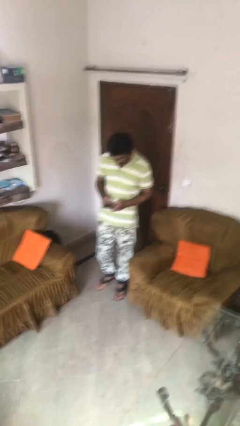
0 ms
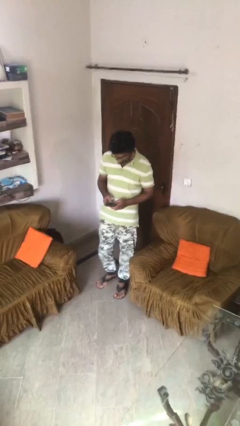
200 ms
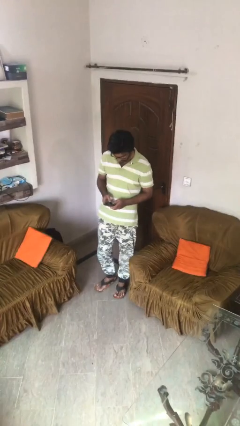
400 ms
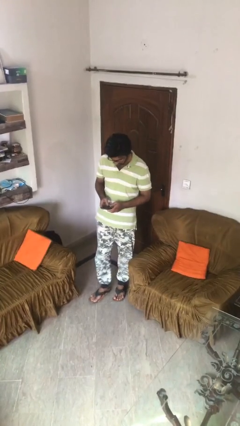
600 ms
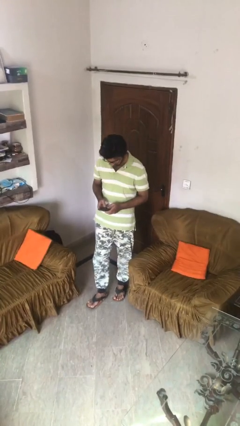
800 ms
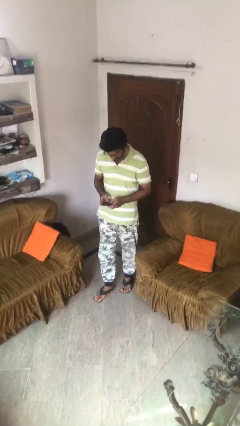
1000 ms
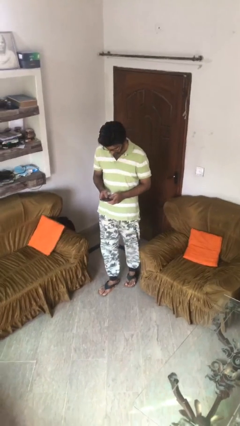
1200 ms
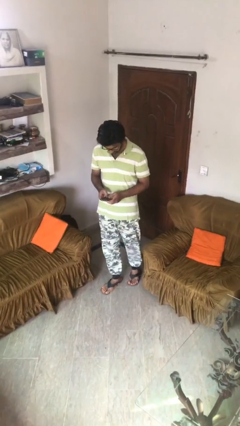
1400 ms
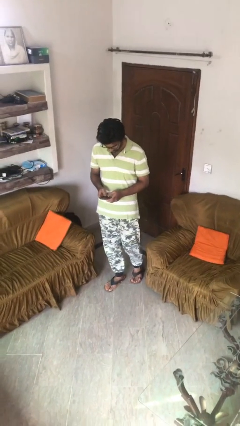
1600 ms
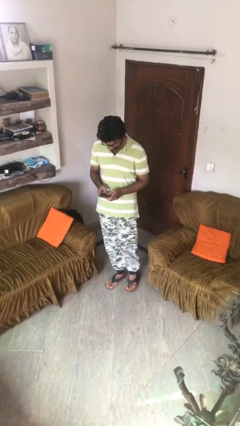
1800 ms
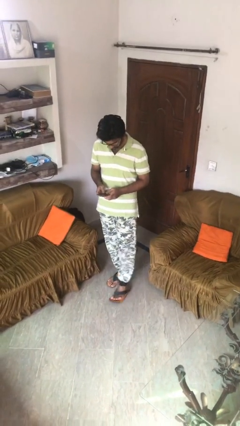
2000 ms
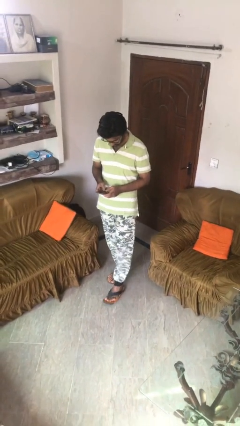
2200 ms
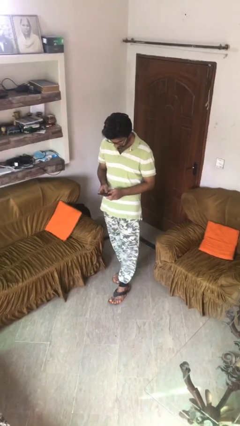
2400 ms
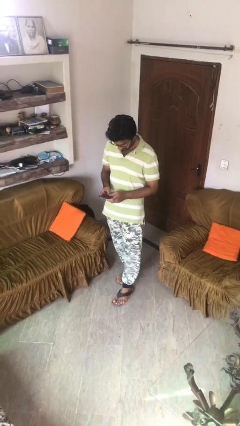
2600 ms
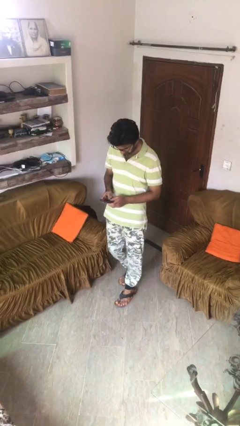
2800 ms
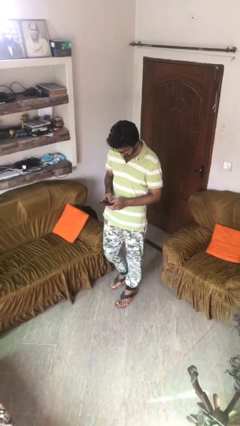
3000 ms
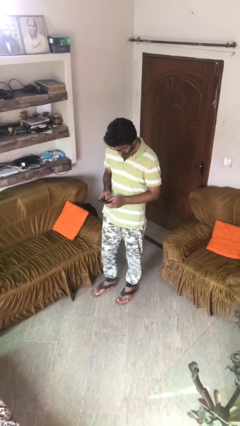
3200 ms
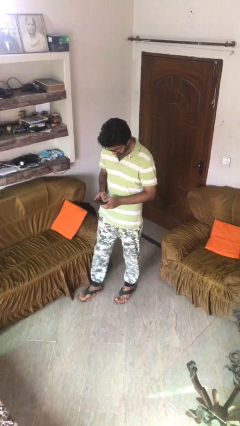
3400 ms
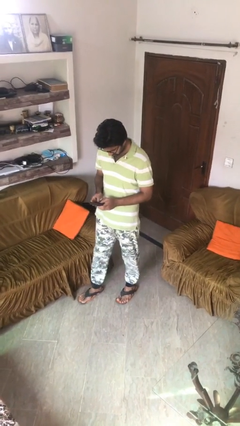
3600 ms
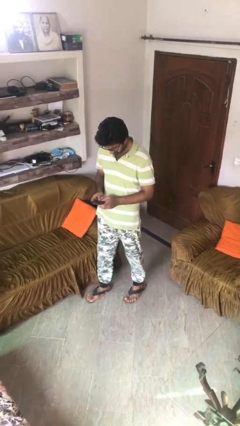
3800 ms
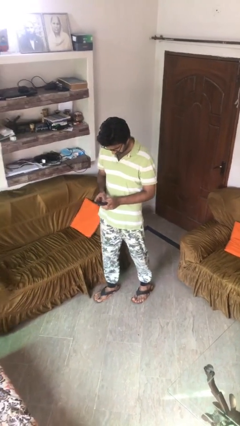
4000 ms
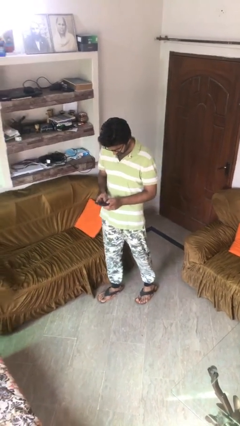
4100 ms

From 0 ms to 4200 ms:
person texts on phone

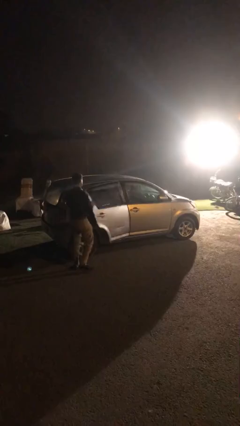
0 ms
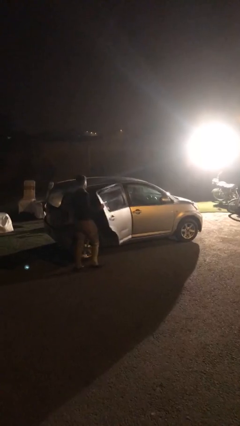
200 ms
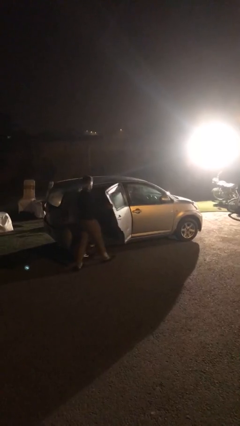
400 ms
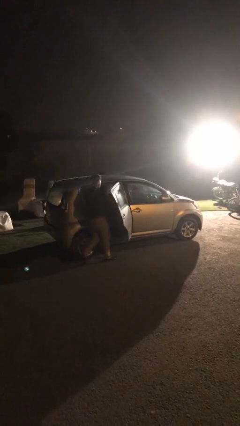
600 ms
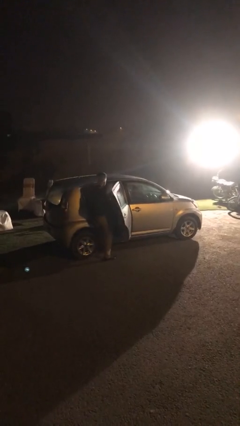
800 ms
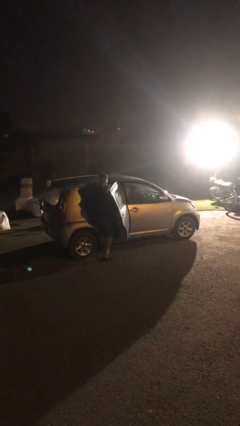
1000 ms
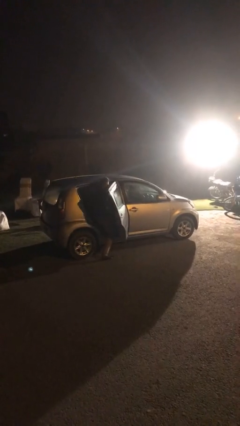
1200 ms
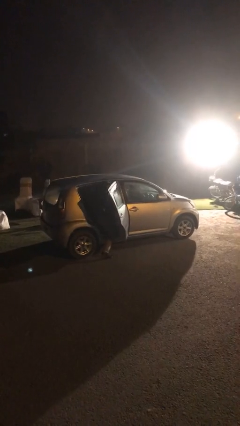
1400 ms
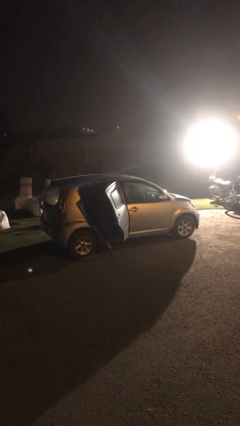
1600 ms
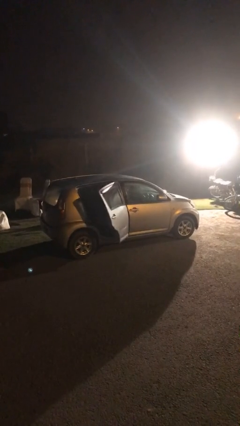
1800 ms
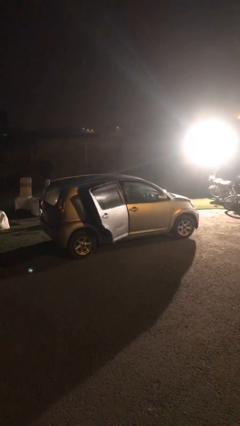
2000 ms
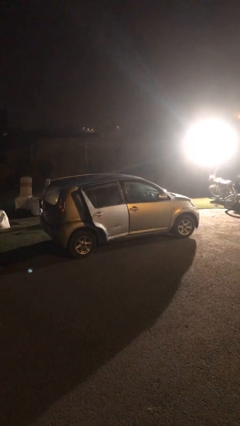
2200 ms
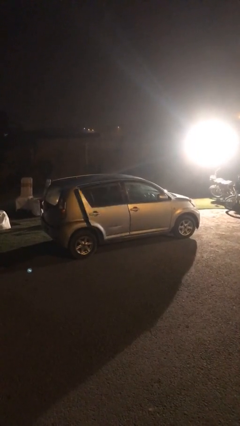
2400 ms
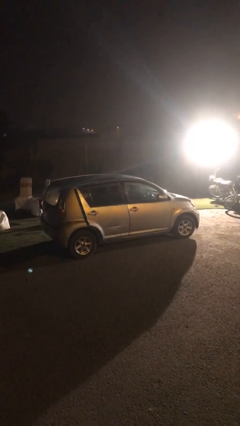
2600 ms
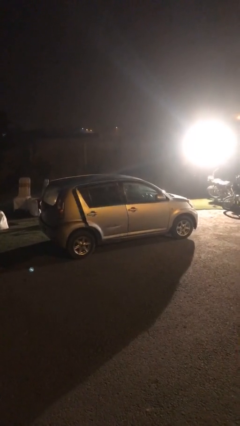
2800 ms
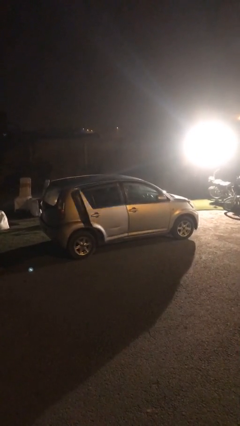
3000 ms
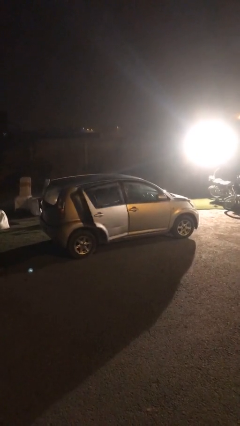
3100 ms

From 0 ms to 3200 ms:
car picks up person

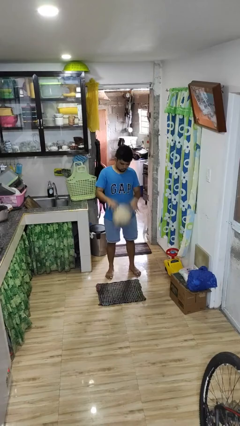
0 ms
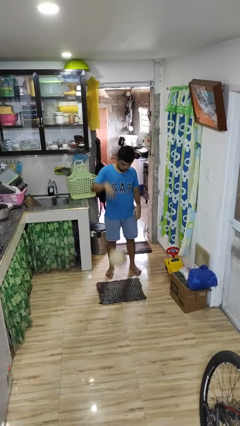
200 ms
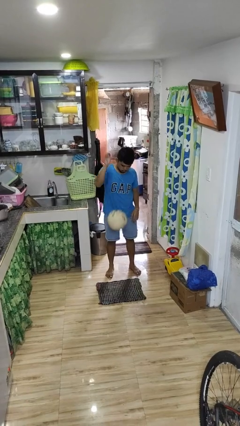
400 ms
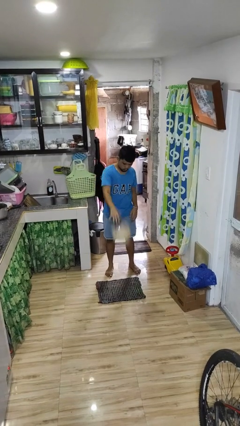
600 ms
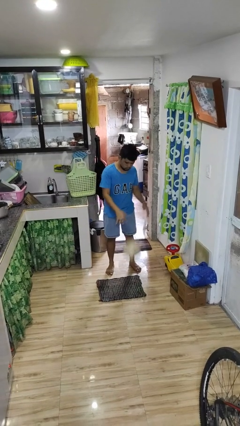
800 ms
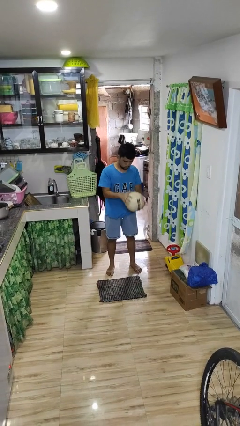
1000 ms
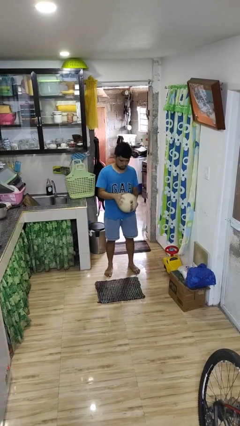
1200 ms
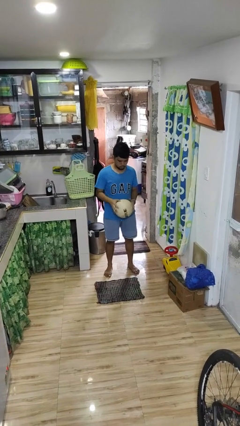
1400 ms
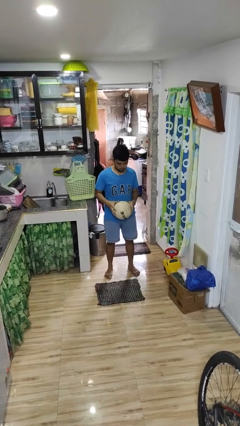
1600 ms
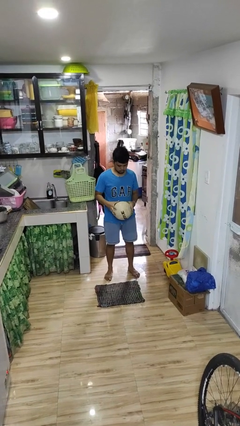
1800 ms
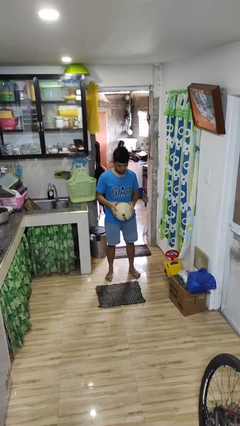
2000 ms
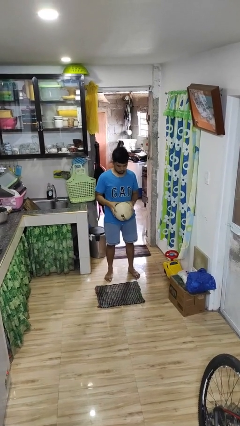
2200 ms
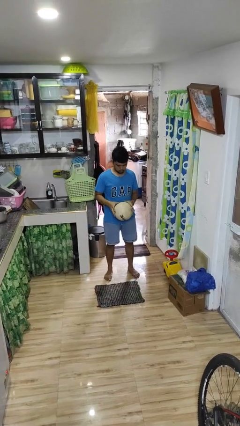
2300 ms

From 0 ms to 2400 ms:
person bounces ball on floor

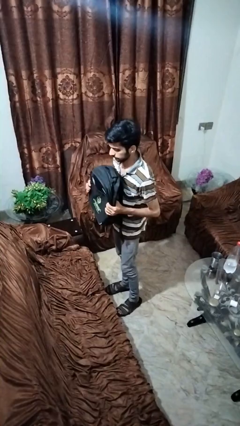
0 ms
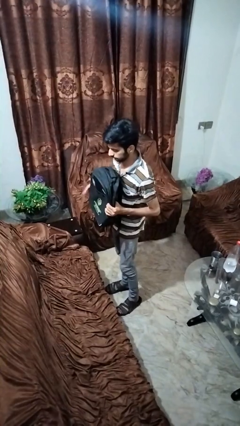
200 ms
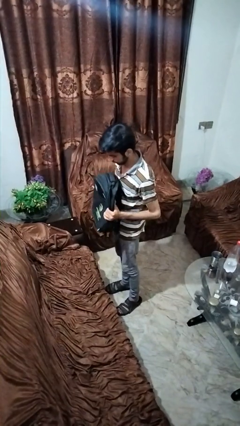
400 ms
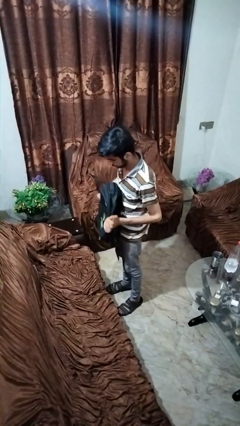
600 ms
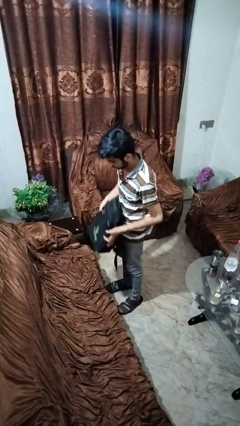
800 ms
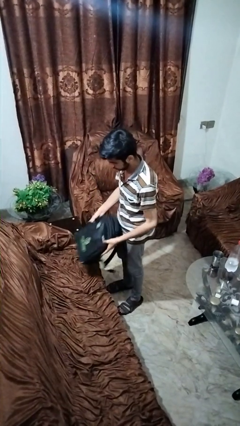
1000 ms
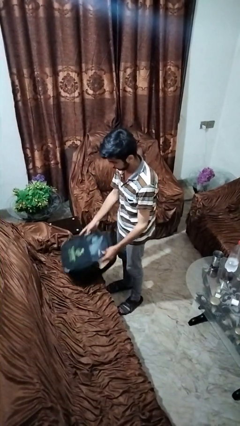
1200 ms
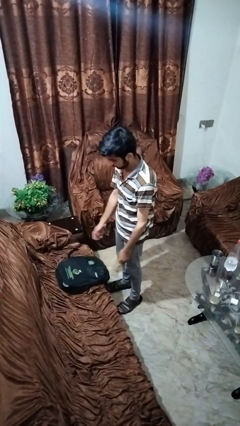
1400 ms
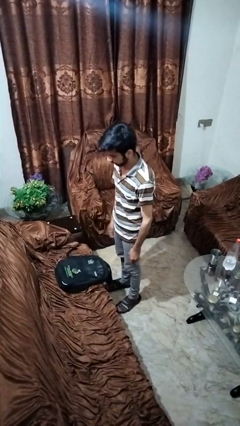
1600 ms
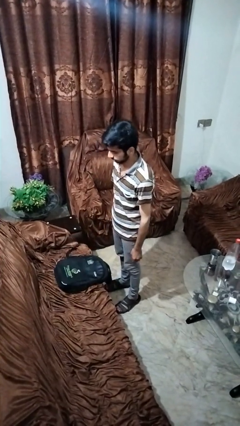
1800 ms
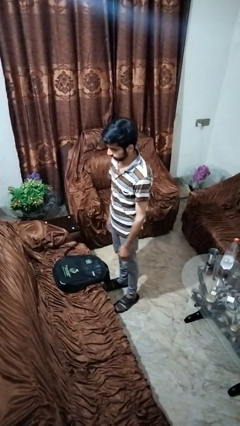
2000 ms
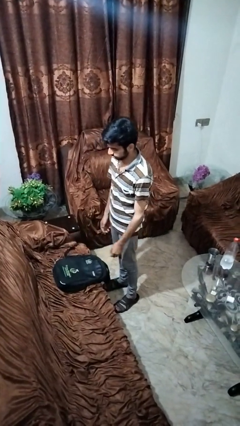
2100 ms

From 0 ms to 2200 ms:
person puts down object on couch

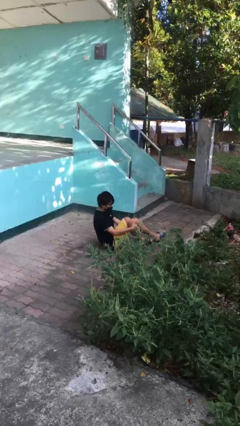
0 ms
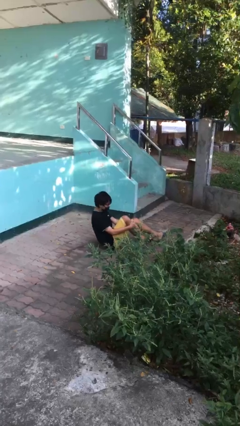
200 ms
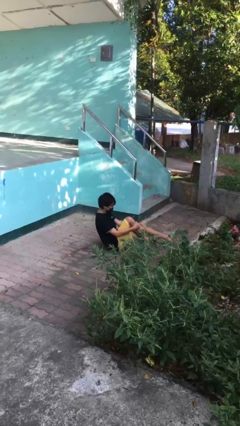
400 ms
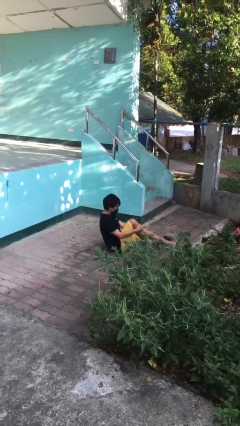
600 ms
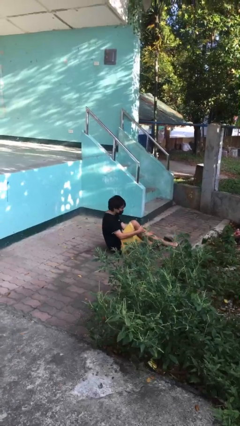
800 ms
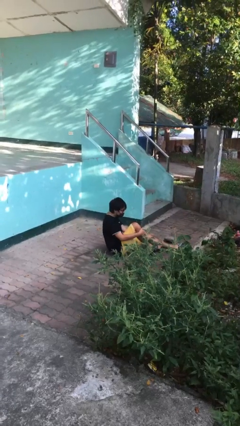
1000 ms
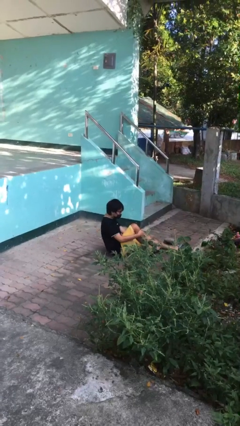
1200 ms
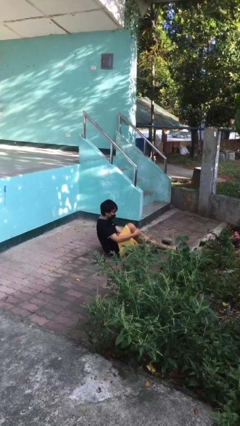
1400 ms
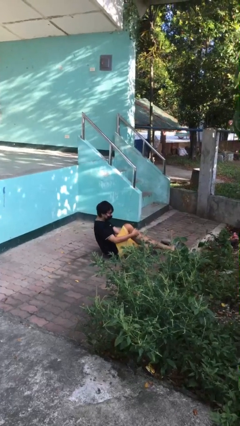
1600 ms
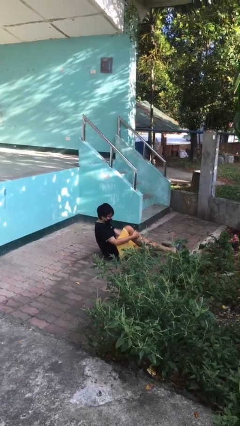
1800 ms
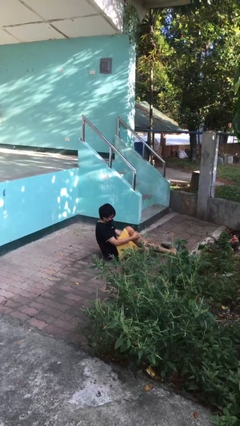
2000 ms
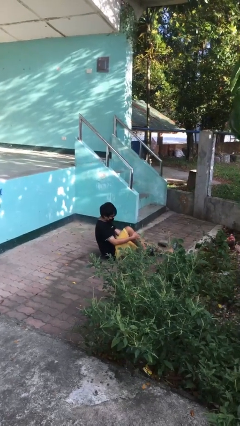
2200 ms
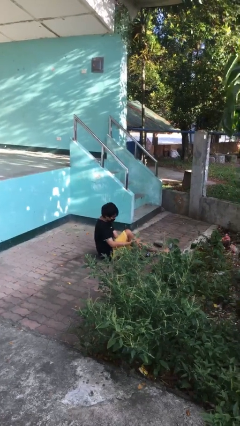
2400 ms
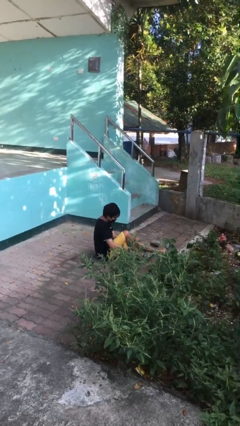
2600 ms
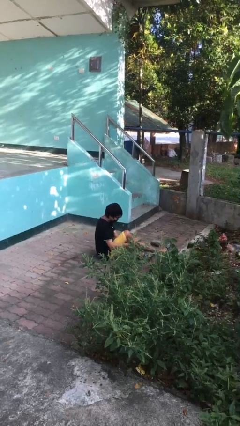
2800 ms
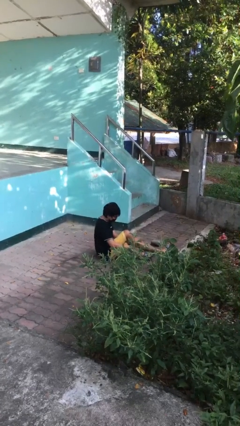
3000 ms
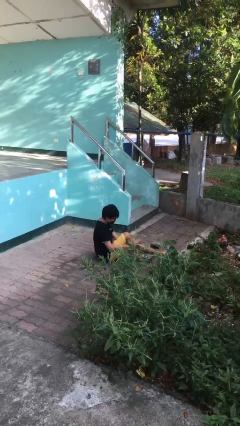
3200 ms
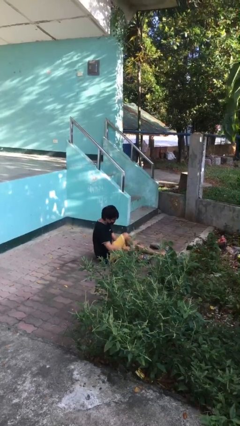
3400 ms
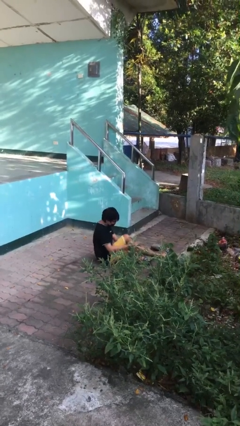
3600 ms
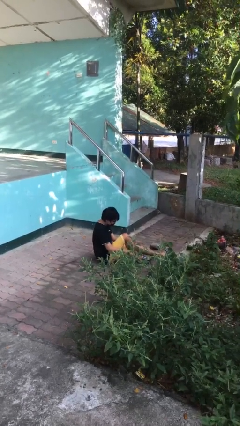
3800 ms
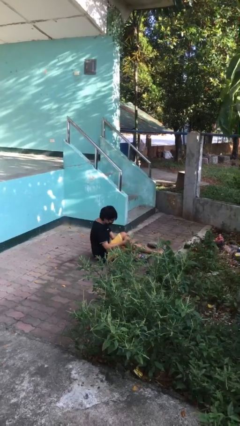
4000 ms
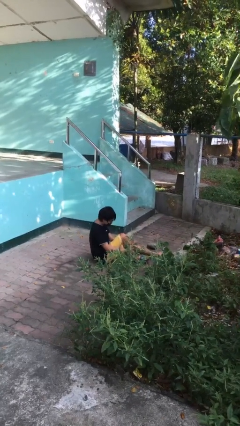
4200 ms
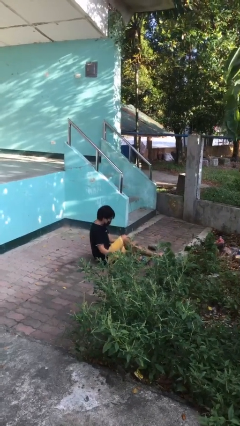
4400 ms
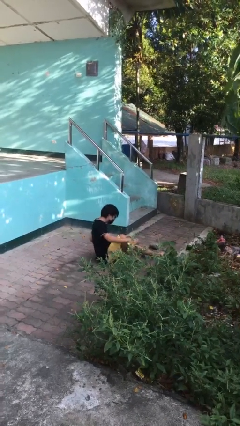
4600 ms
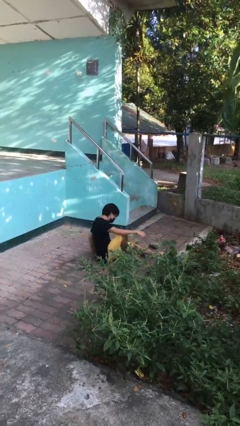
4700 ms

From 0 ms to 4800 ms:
person lies down on floor

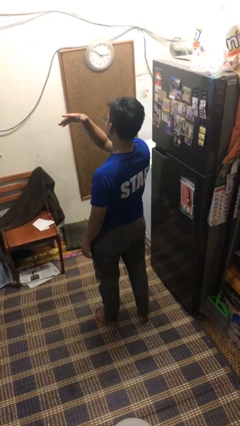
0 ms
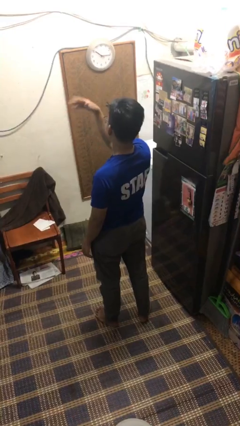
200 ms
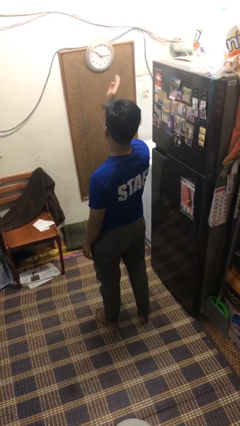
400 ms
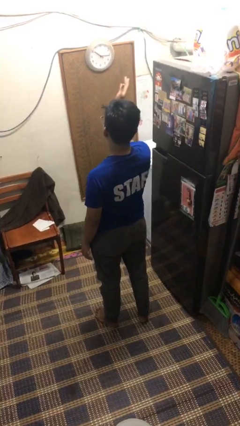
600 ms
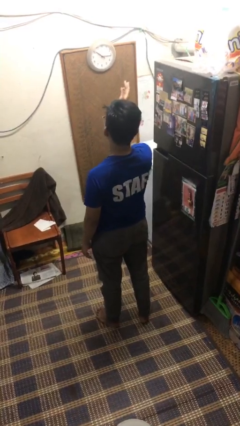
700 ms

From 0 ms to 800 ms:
person gestures swipe right
